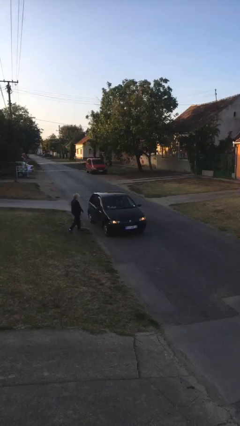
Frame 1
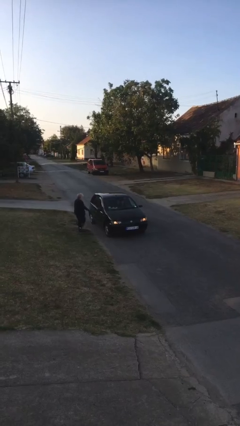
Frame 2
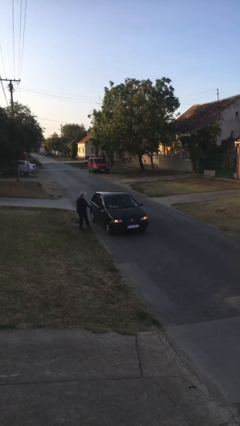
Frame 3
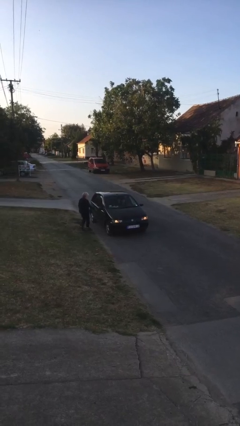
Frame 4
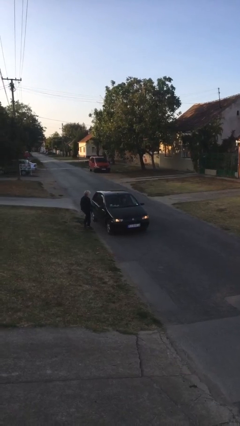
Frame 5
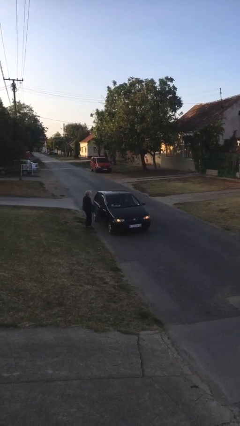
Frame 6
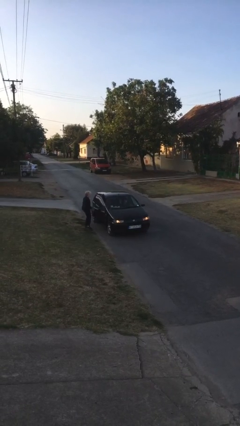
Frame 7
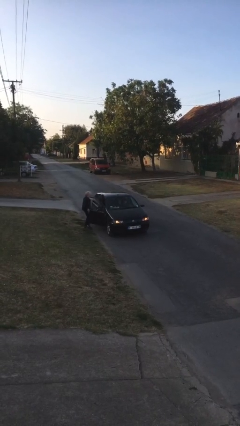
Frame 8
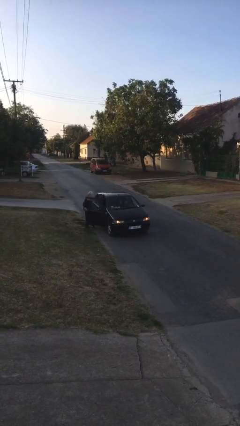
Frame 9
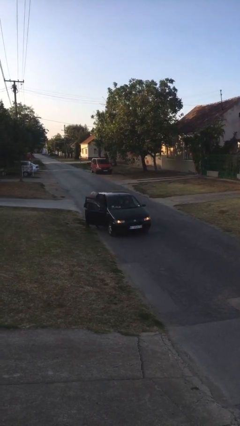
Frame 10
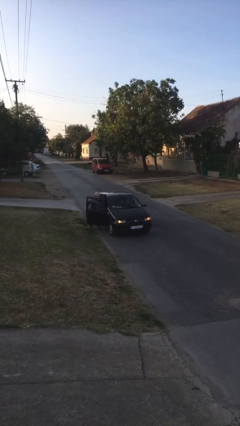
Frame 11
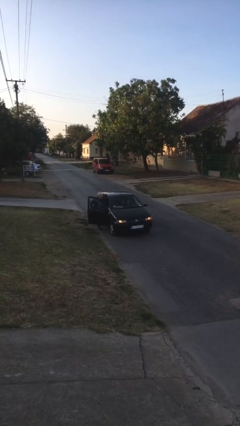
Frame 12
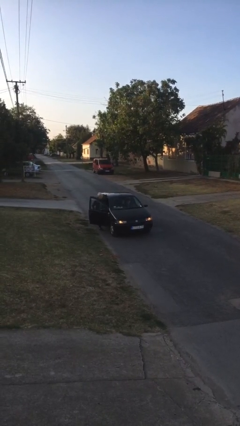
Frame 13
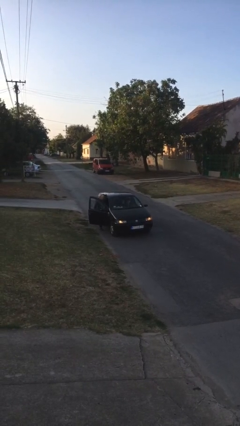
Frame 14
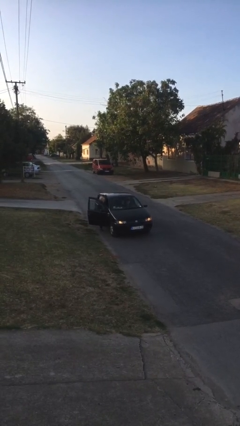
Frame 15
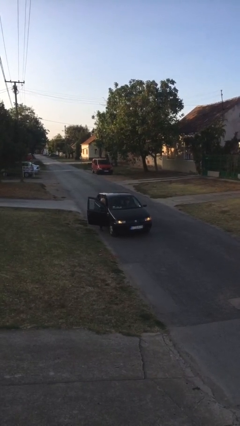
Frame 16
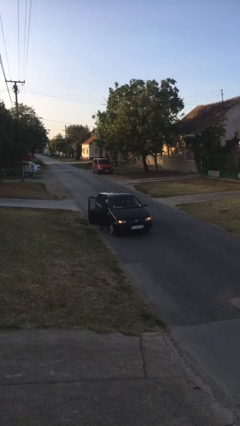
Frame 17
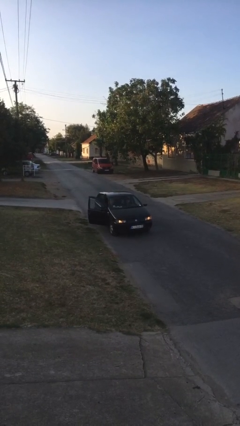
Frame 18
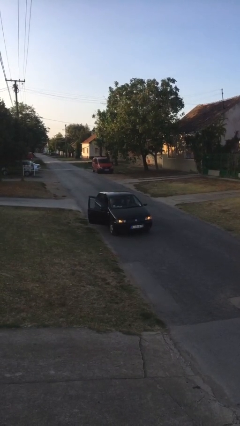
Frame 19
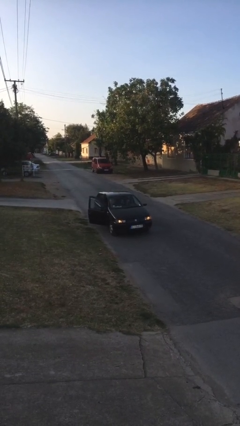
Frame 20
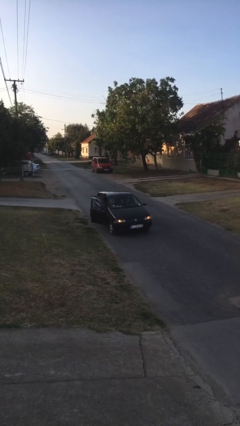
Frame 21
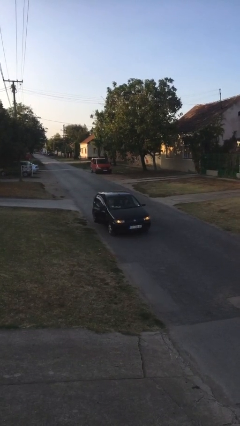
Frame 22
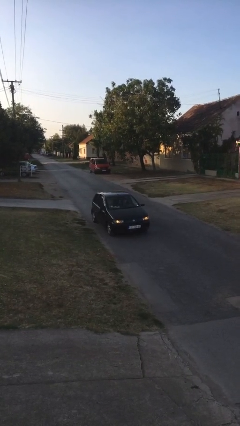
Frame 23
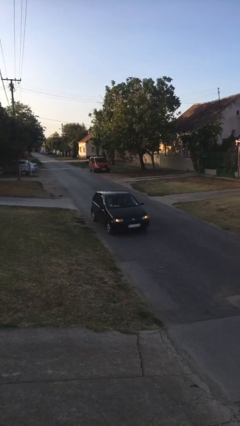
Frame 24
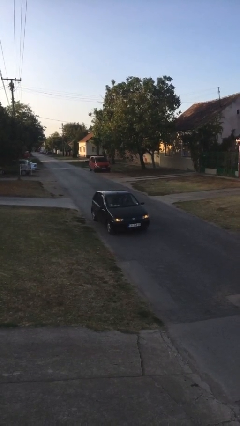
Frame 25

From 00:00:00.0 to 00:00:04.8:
car picks up person

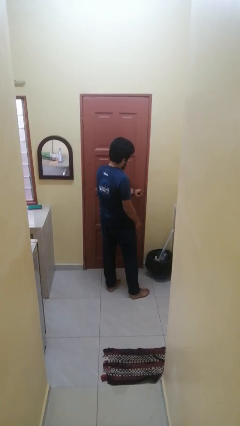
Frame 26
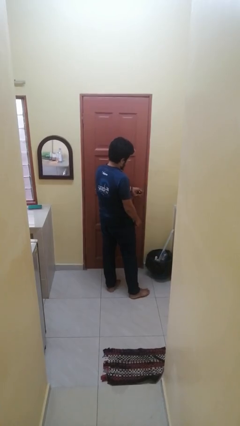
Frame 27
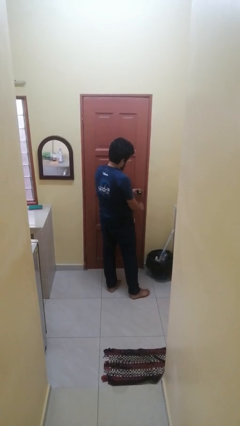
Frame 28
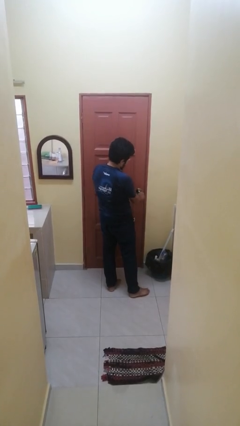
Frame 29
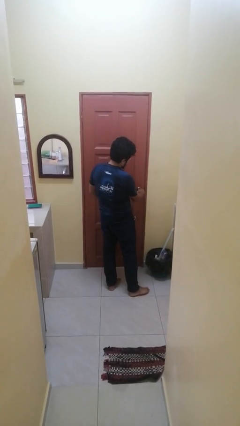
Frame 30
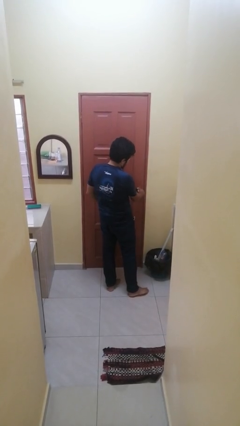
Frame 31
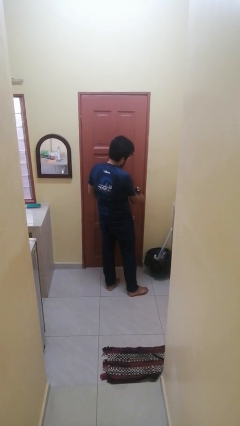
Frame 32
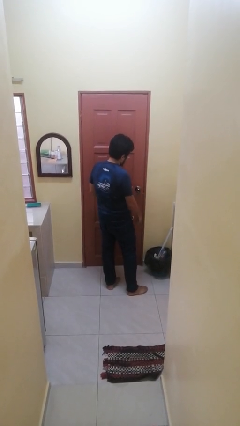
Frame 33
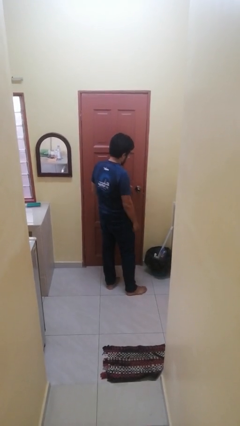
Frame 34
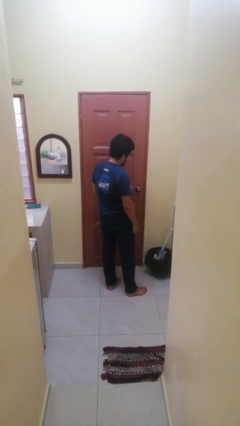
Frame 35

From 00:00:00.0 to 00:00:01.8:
person locks door with keys

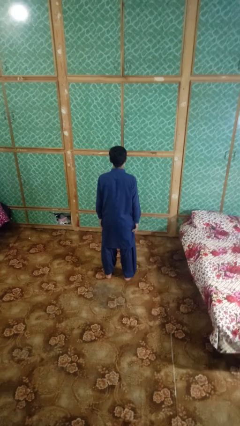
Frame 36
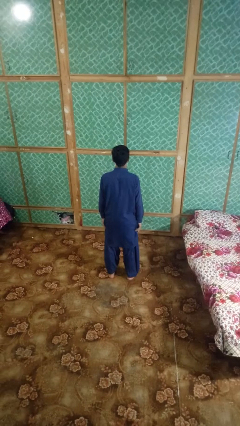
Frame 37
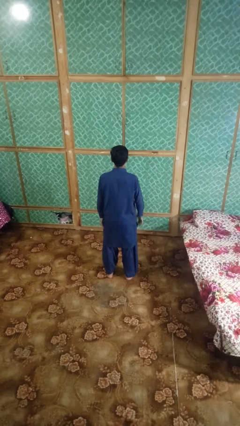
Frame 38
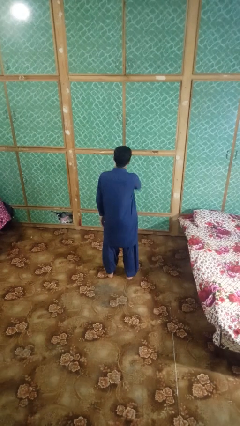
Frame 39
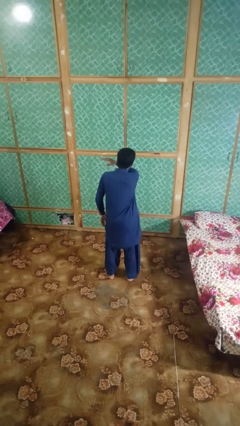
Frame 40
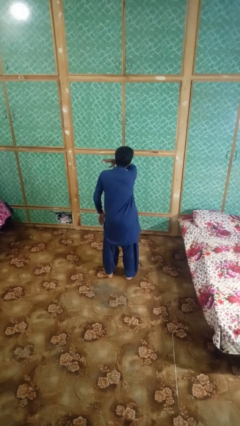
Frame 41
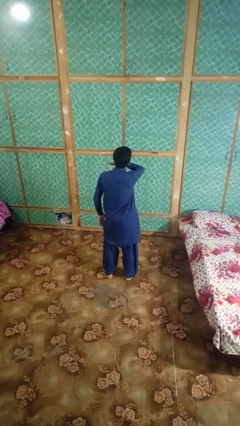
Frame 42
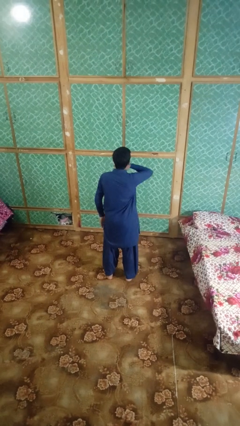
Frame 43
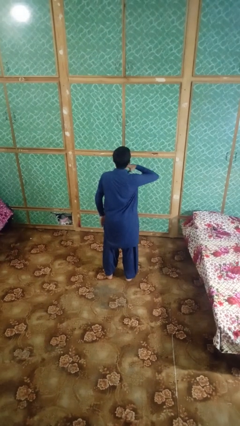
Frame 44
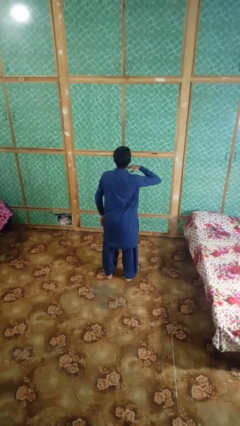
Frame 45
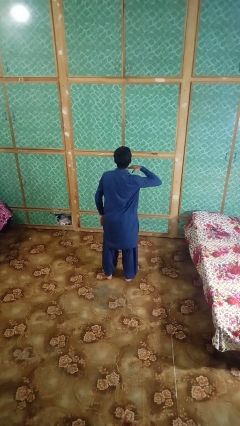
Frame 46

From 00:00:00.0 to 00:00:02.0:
person gestures cut

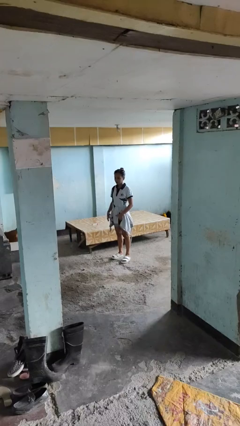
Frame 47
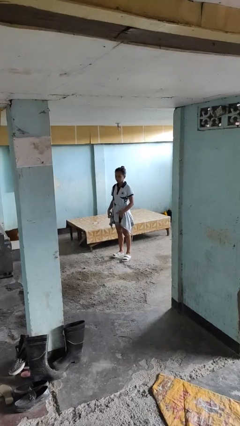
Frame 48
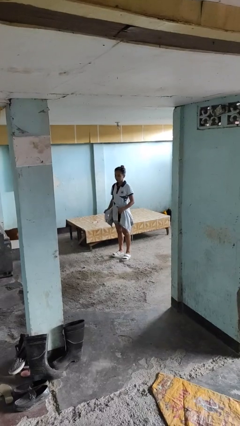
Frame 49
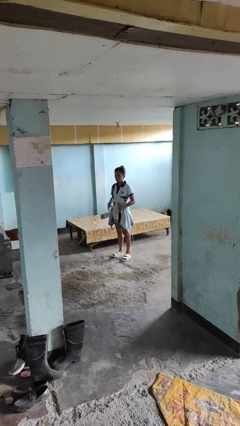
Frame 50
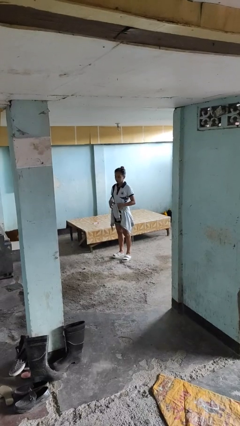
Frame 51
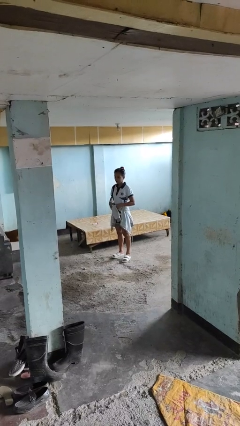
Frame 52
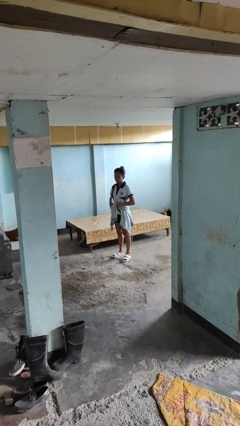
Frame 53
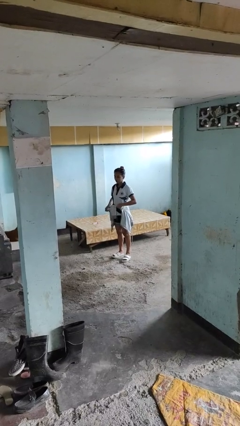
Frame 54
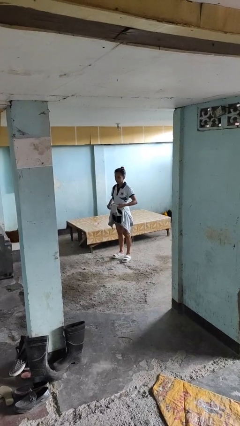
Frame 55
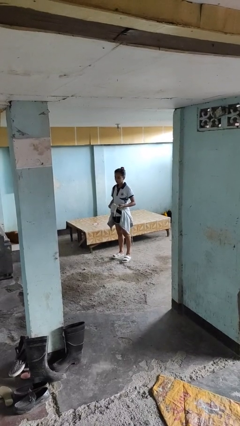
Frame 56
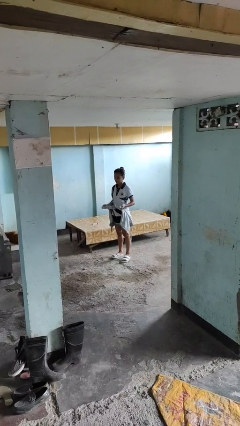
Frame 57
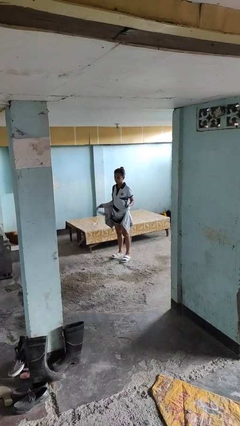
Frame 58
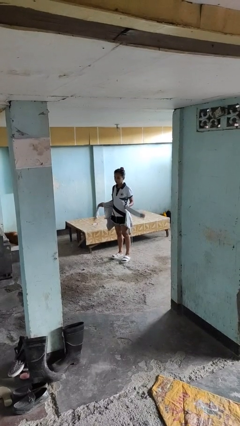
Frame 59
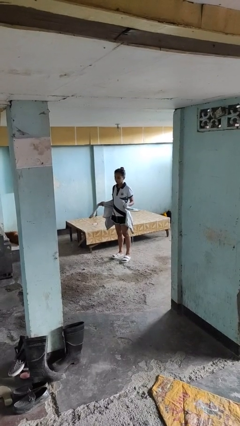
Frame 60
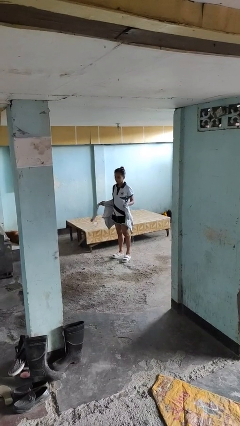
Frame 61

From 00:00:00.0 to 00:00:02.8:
person unties jacket around waist

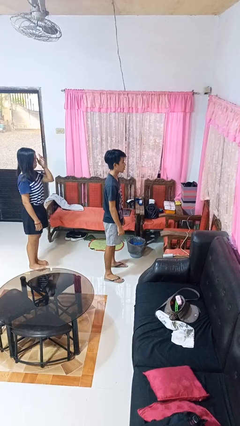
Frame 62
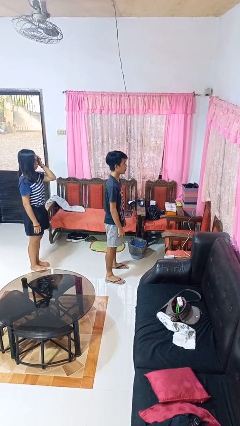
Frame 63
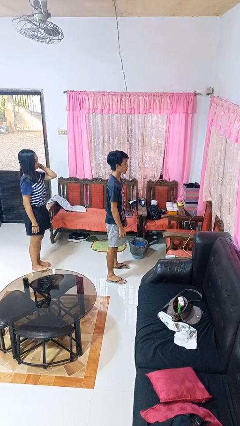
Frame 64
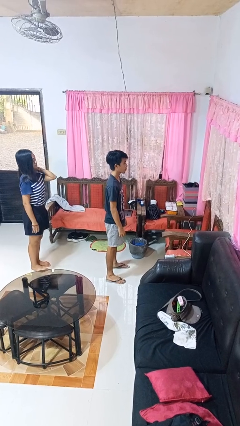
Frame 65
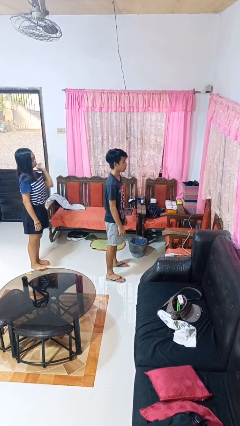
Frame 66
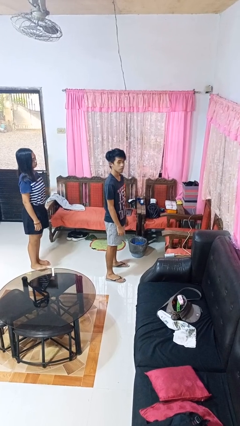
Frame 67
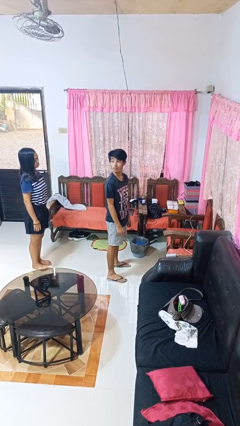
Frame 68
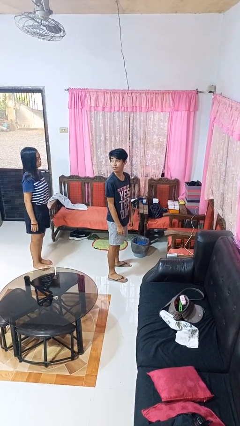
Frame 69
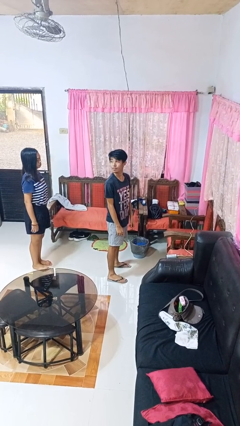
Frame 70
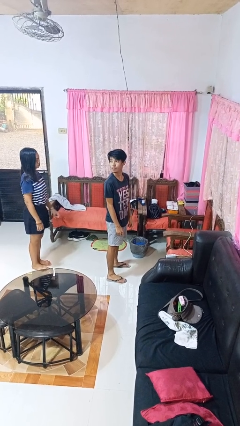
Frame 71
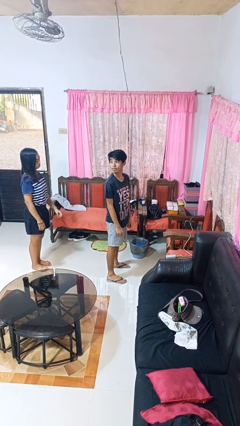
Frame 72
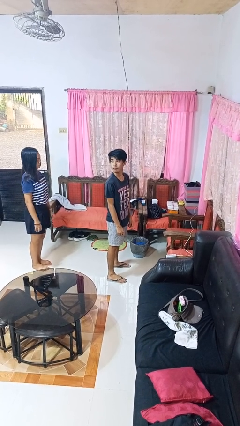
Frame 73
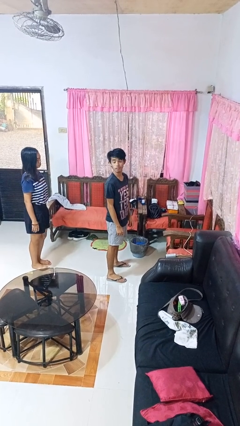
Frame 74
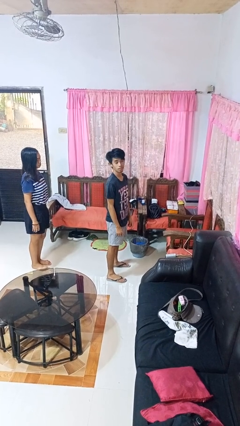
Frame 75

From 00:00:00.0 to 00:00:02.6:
person looks over shoulder

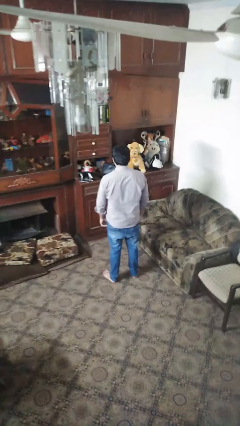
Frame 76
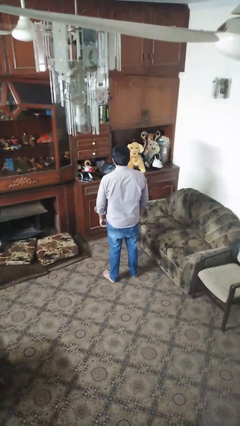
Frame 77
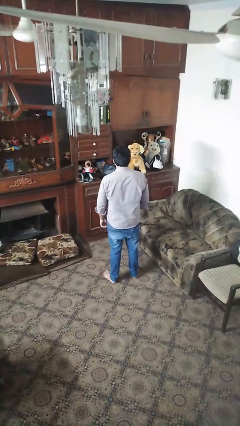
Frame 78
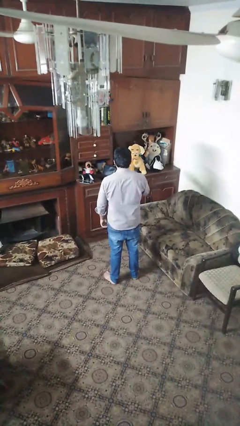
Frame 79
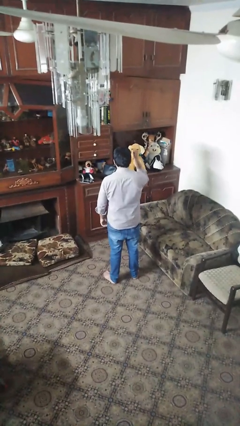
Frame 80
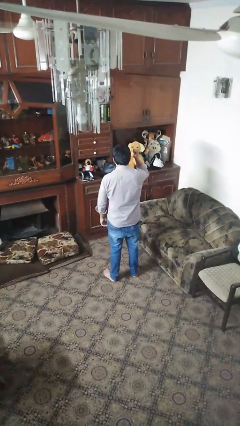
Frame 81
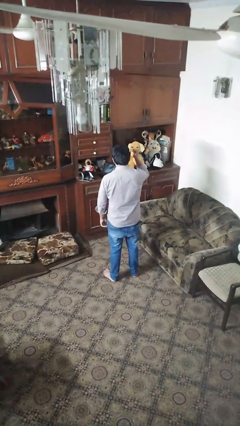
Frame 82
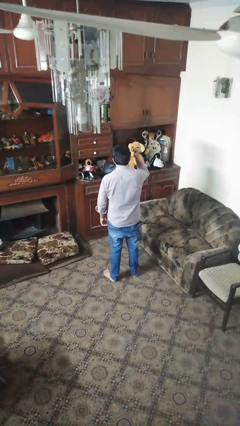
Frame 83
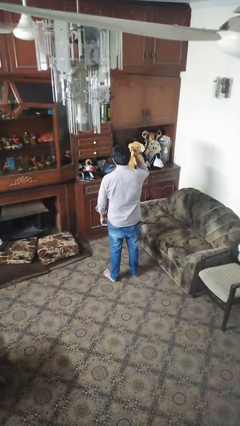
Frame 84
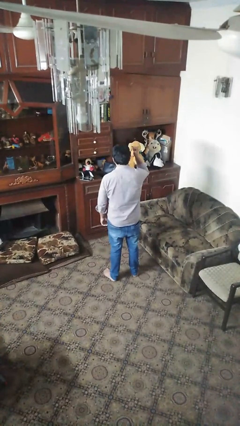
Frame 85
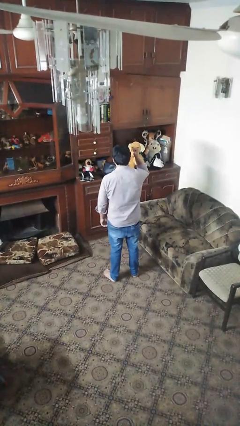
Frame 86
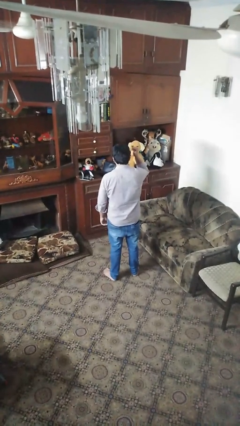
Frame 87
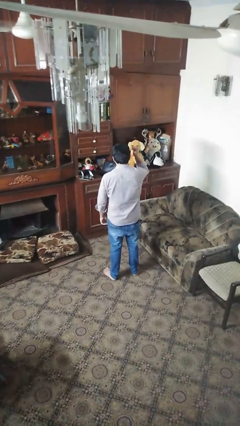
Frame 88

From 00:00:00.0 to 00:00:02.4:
person gestures behind me

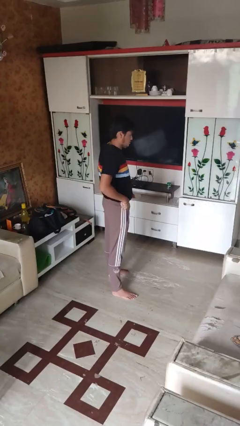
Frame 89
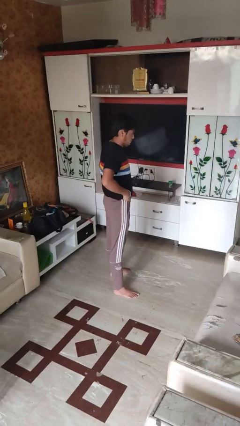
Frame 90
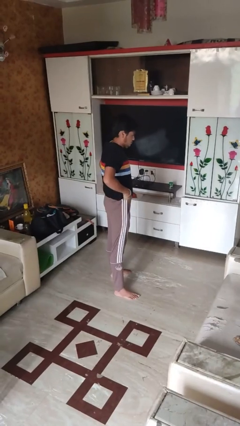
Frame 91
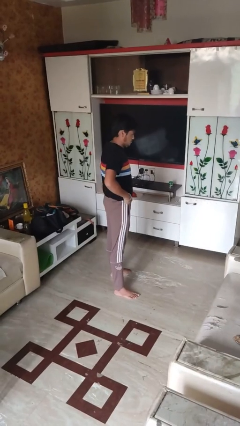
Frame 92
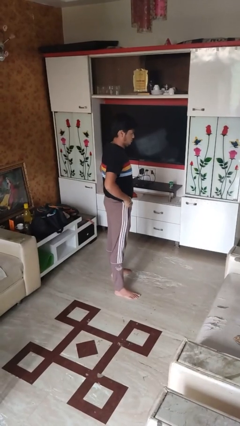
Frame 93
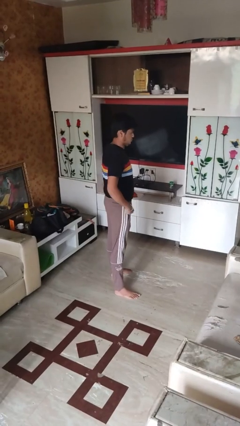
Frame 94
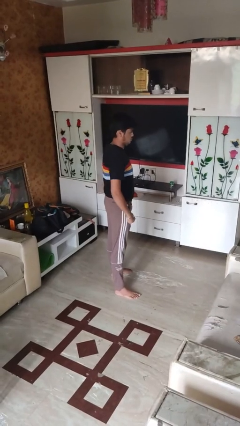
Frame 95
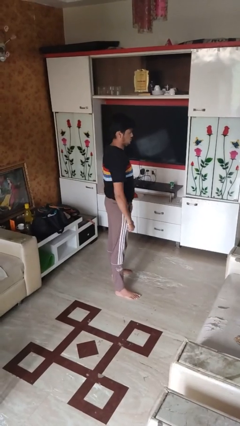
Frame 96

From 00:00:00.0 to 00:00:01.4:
person hikes up pants
